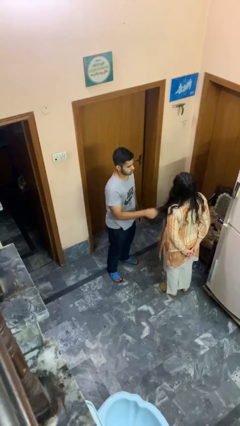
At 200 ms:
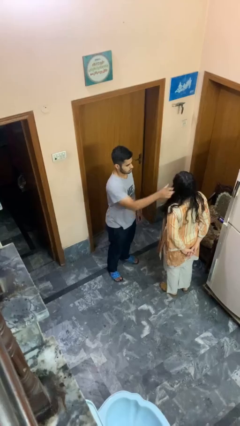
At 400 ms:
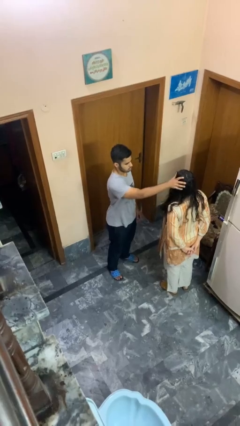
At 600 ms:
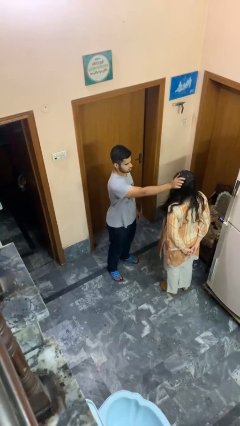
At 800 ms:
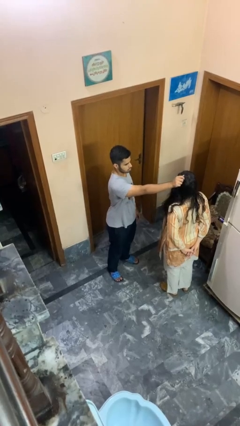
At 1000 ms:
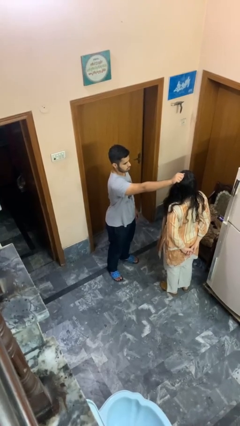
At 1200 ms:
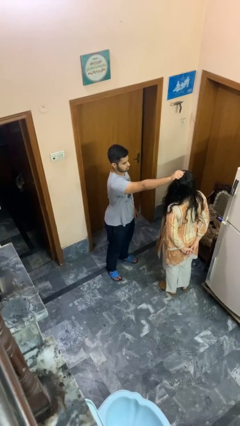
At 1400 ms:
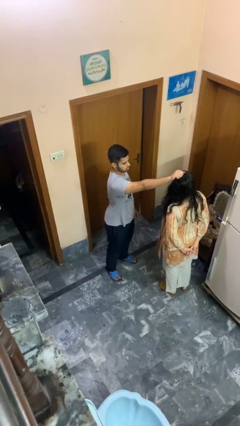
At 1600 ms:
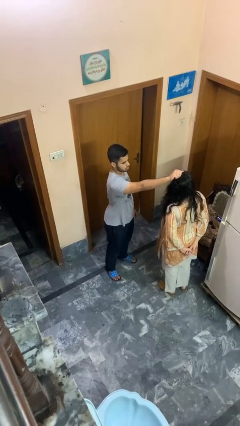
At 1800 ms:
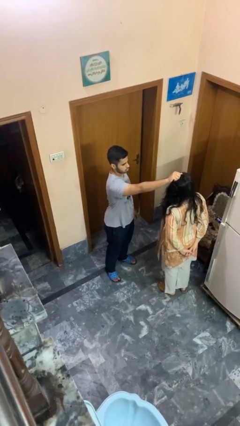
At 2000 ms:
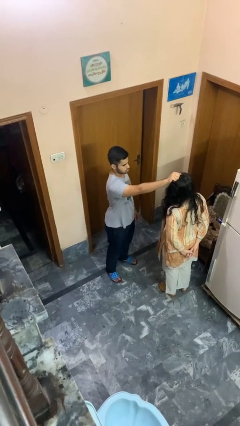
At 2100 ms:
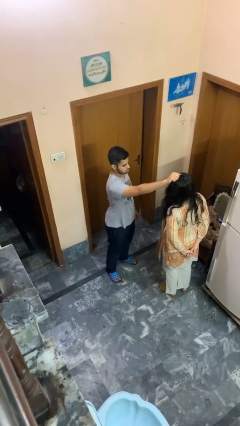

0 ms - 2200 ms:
person grabs person by hair

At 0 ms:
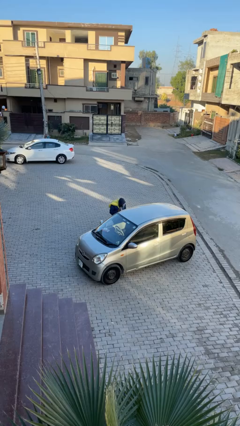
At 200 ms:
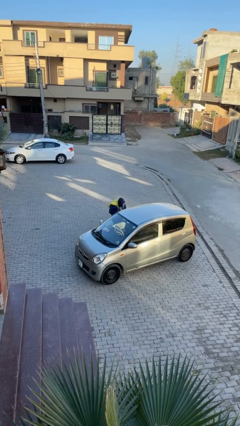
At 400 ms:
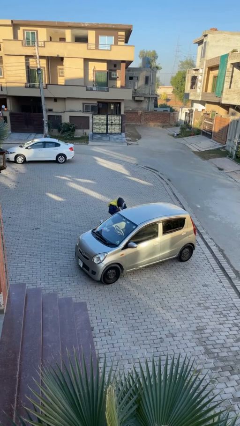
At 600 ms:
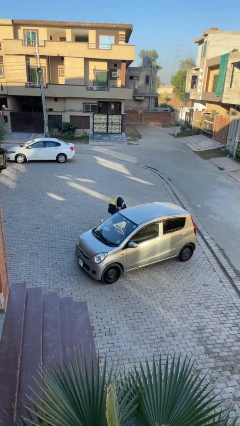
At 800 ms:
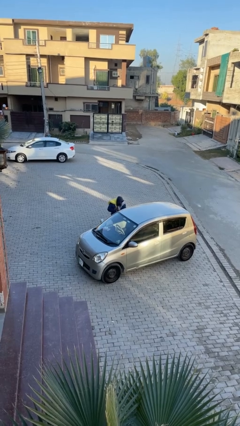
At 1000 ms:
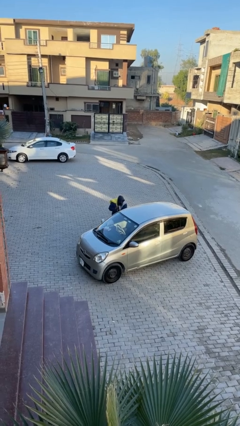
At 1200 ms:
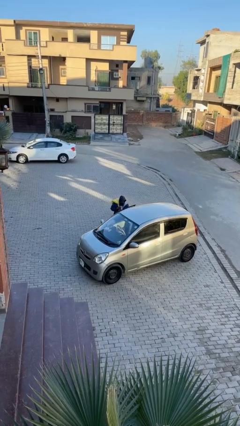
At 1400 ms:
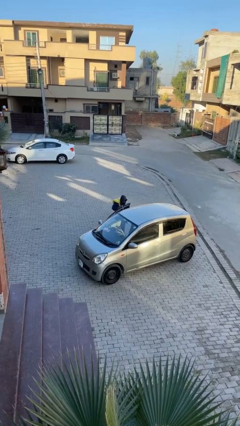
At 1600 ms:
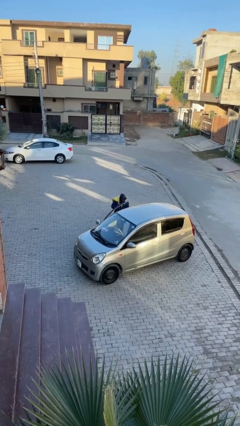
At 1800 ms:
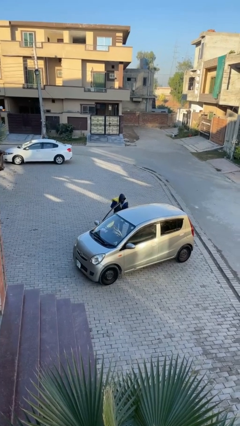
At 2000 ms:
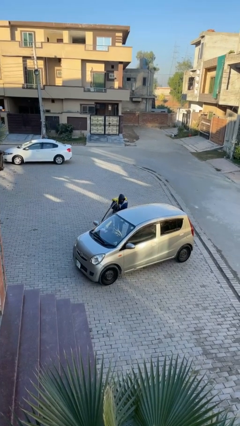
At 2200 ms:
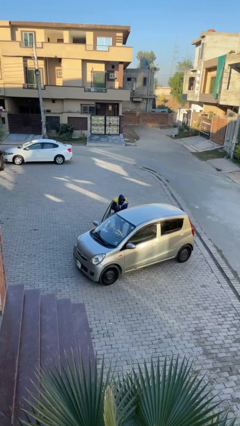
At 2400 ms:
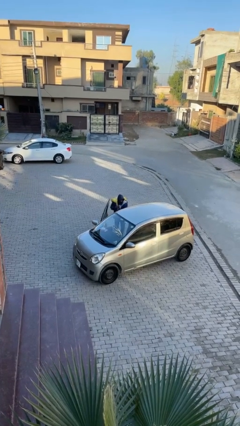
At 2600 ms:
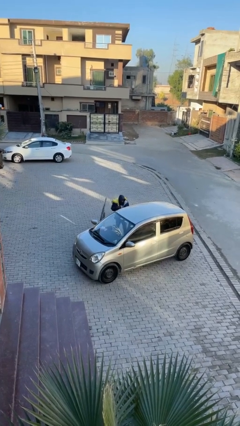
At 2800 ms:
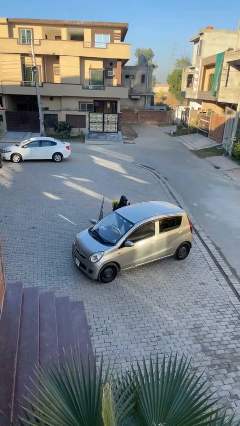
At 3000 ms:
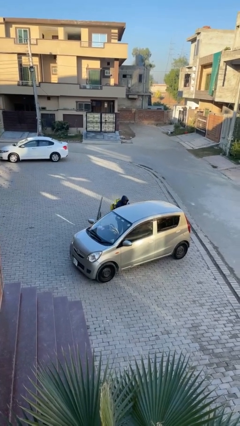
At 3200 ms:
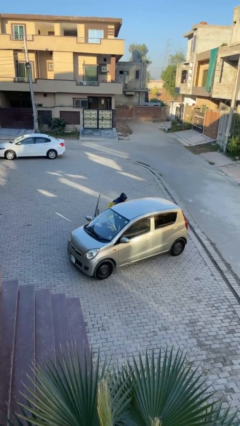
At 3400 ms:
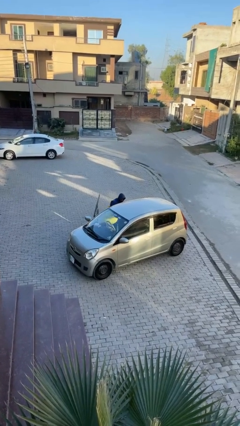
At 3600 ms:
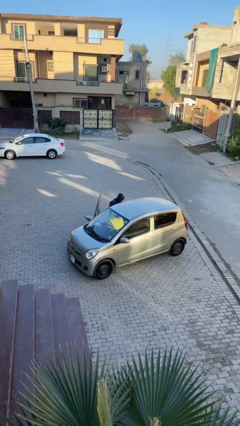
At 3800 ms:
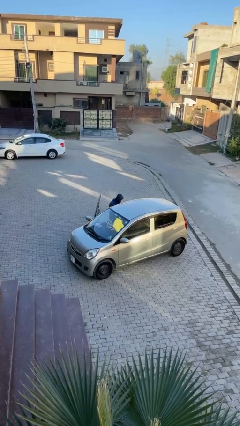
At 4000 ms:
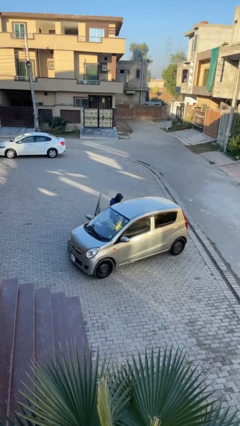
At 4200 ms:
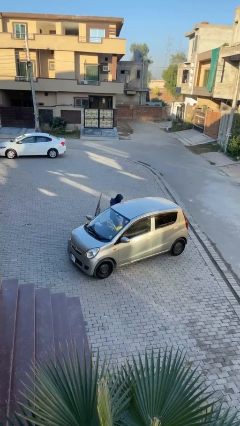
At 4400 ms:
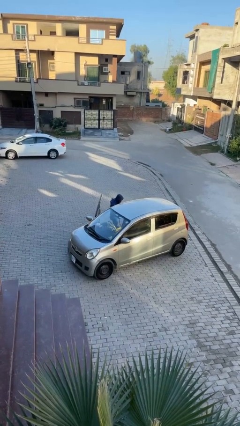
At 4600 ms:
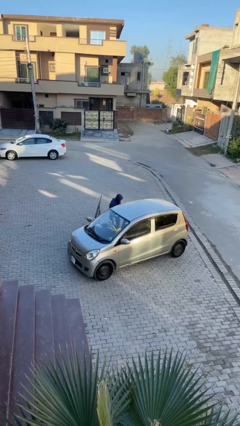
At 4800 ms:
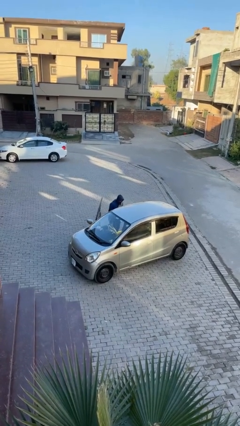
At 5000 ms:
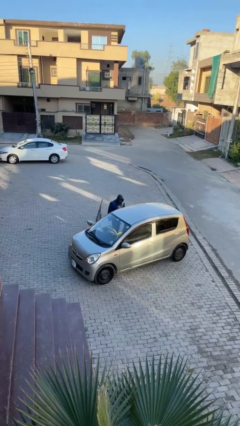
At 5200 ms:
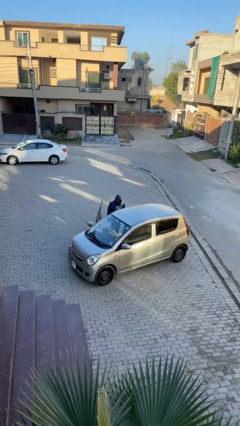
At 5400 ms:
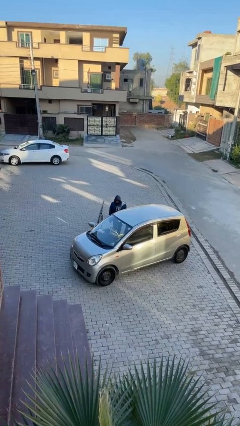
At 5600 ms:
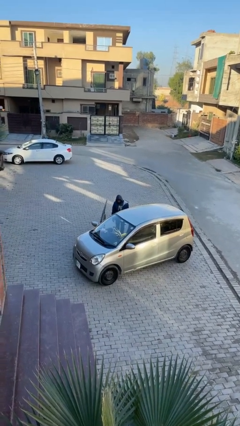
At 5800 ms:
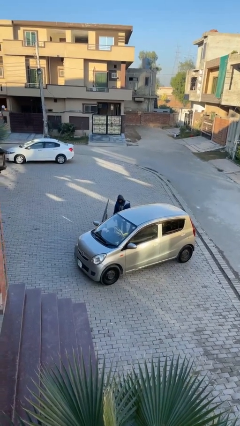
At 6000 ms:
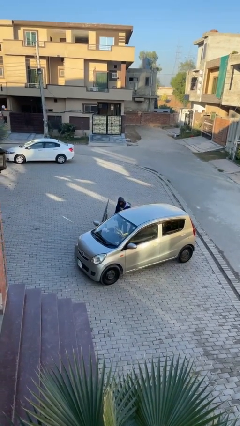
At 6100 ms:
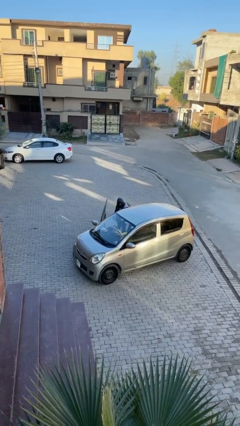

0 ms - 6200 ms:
person loads car

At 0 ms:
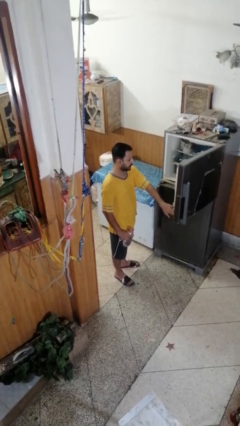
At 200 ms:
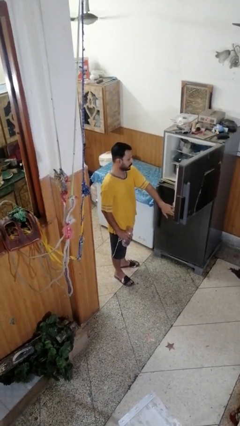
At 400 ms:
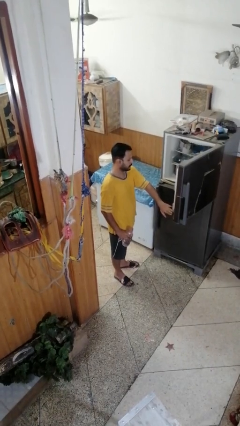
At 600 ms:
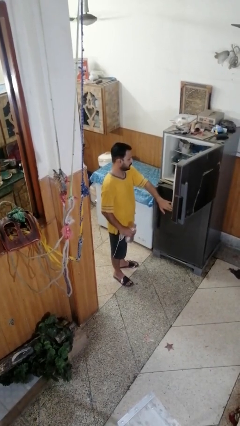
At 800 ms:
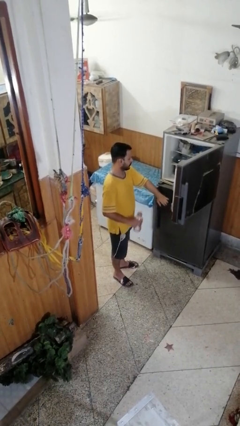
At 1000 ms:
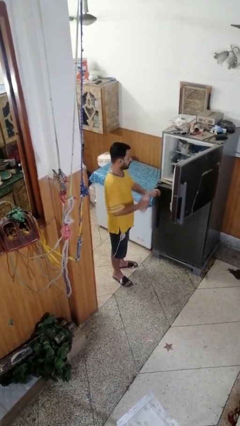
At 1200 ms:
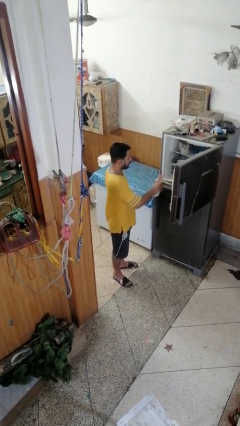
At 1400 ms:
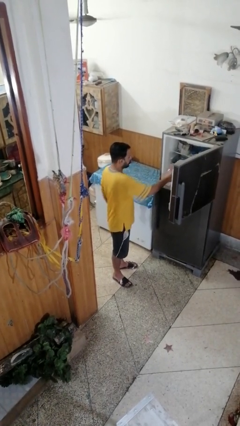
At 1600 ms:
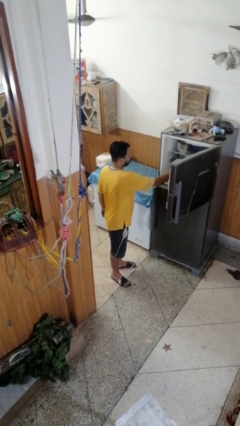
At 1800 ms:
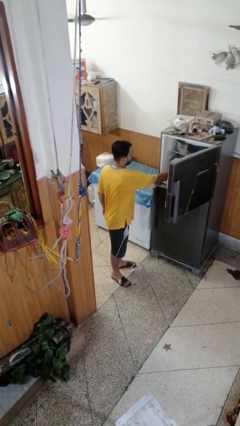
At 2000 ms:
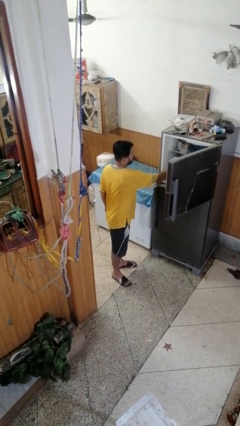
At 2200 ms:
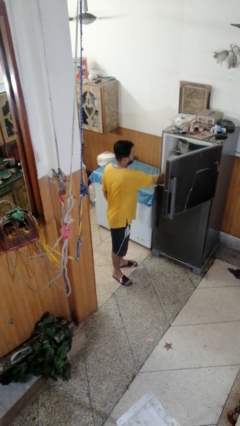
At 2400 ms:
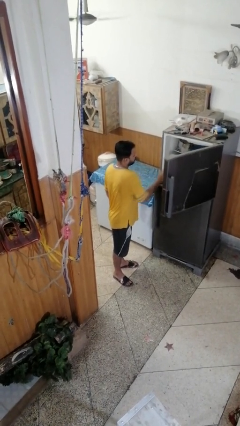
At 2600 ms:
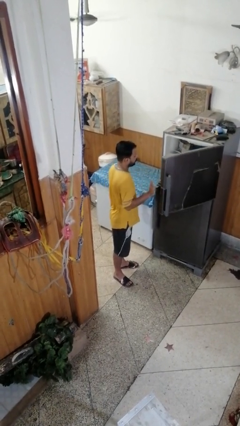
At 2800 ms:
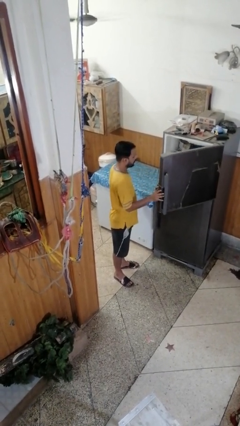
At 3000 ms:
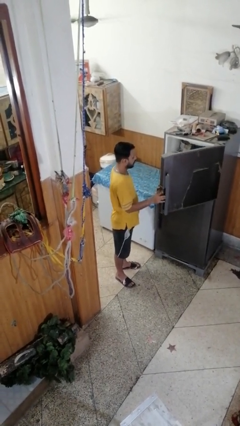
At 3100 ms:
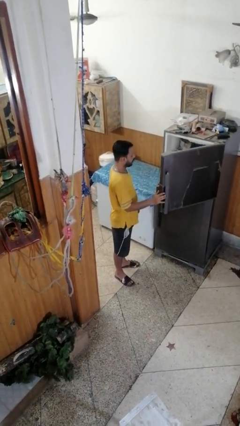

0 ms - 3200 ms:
person puts object into refrigerator

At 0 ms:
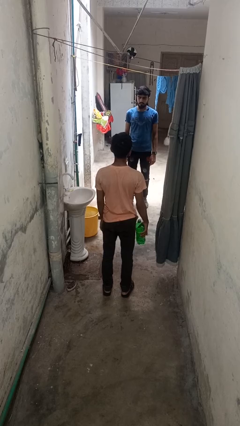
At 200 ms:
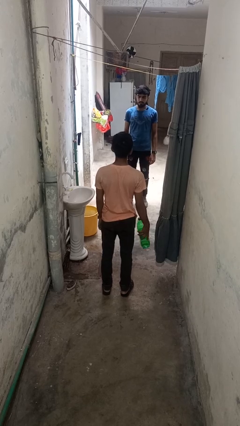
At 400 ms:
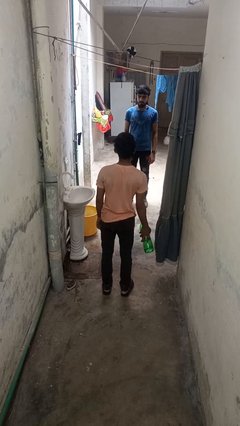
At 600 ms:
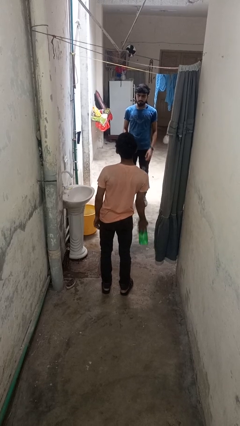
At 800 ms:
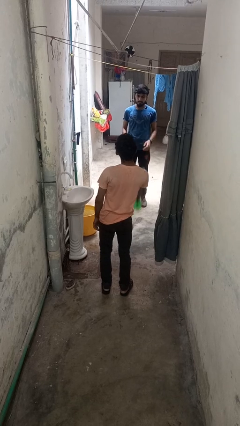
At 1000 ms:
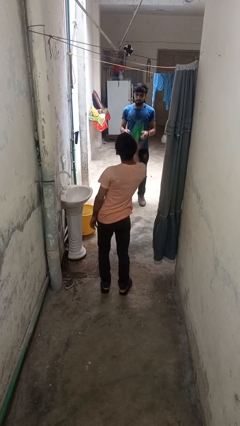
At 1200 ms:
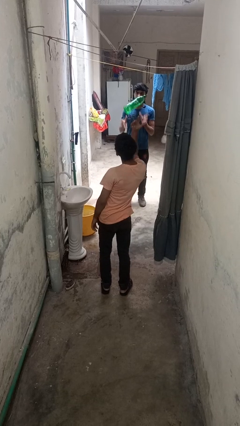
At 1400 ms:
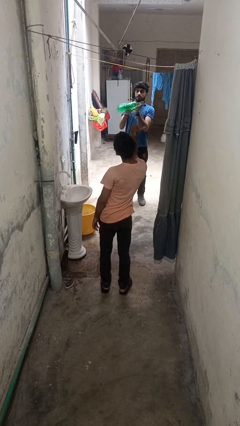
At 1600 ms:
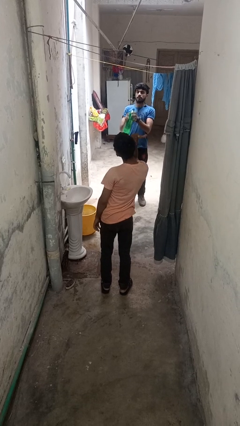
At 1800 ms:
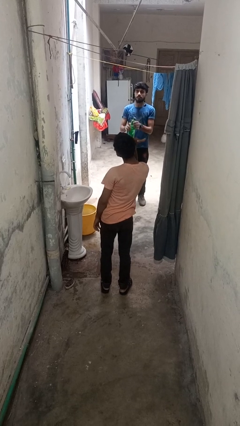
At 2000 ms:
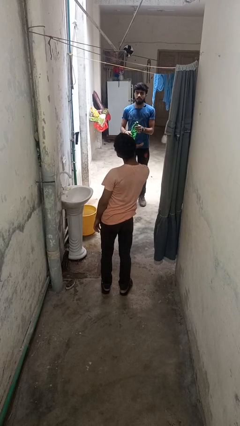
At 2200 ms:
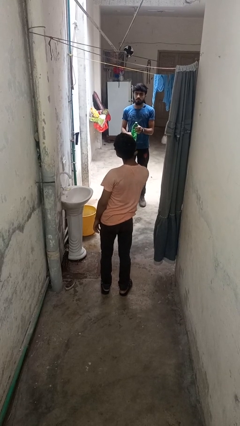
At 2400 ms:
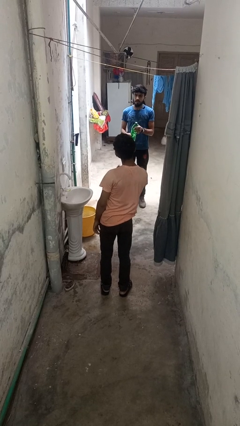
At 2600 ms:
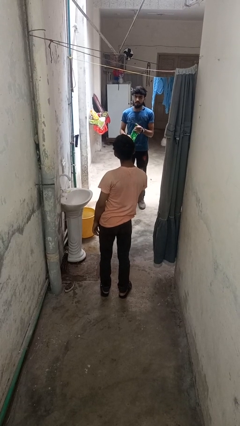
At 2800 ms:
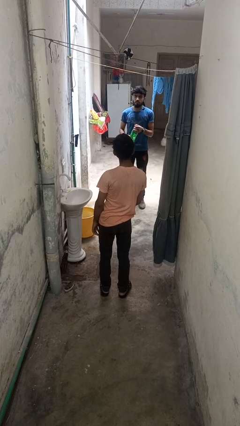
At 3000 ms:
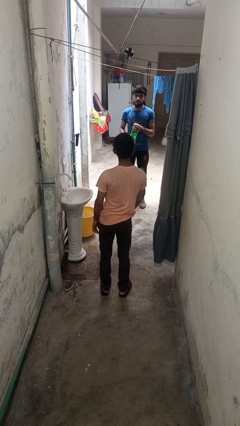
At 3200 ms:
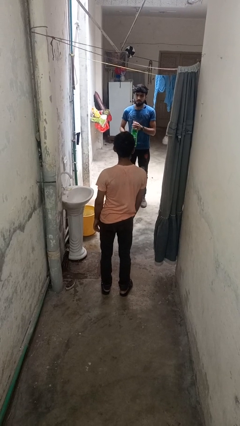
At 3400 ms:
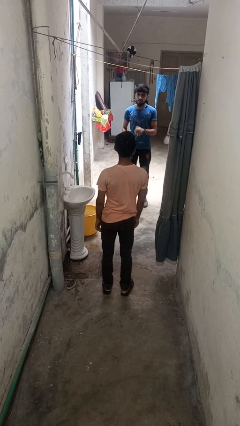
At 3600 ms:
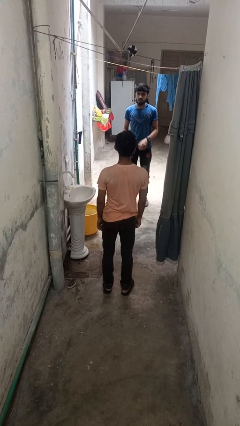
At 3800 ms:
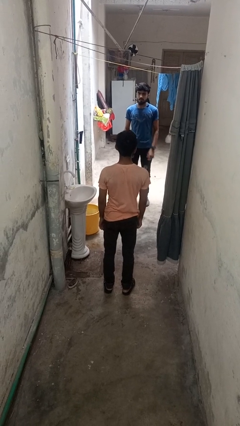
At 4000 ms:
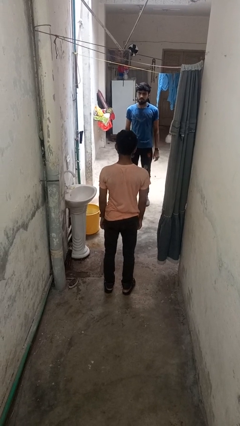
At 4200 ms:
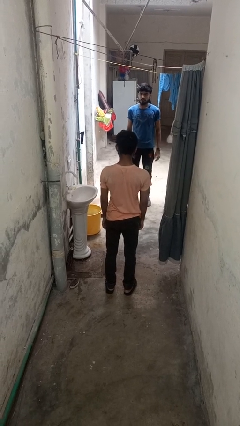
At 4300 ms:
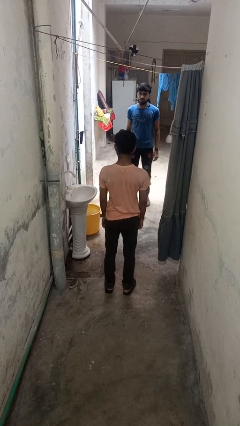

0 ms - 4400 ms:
person throws object to person

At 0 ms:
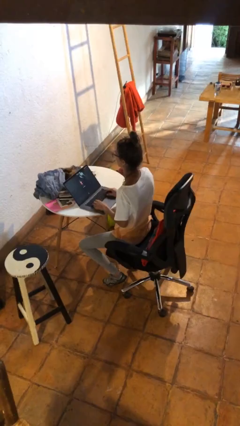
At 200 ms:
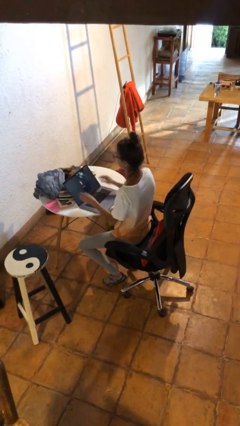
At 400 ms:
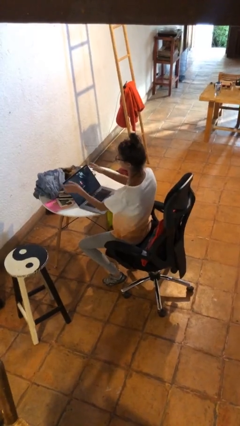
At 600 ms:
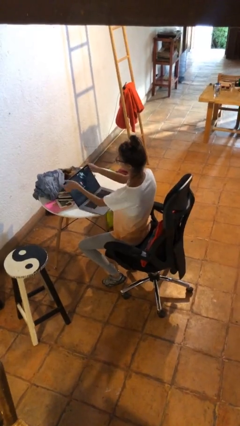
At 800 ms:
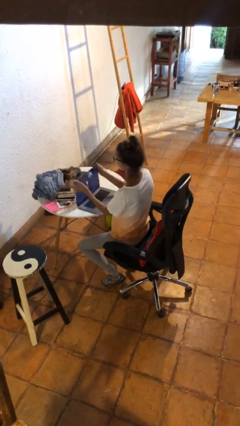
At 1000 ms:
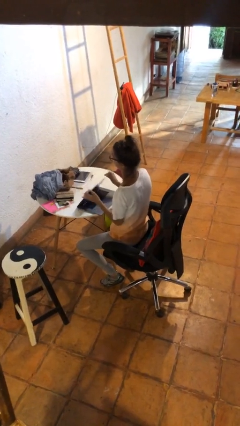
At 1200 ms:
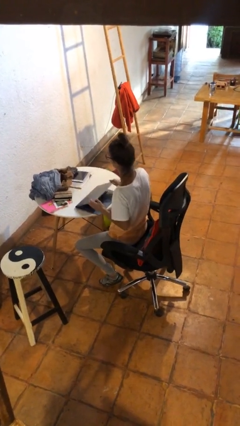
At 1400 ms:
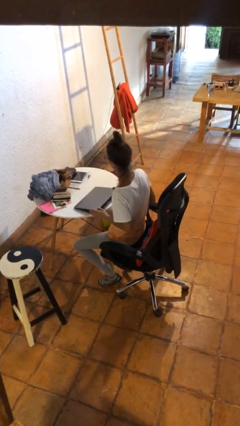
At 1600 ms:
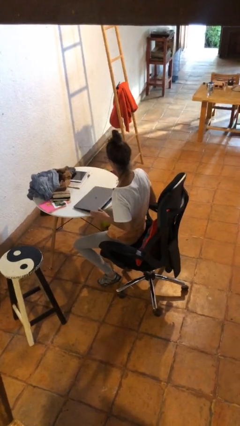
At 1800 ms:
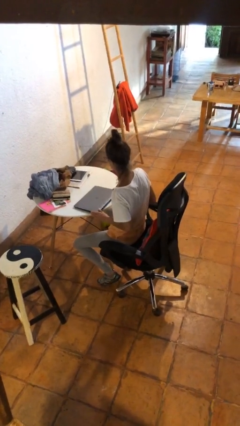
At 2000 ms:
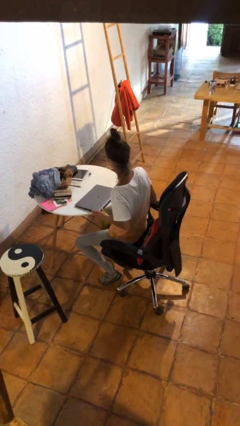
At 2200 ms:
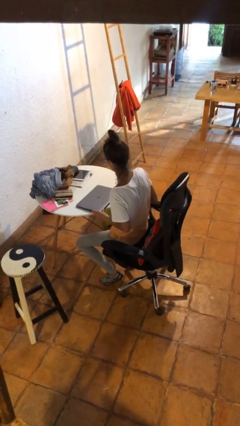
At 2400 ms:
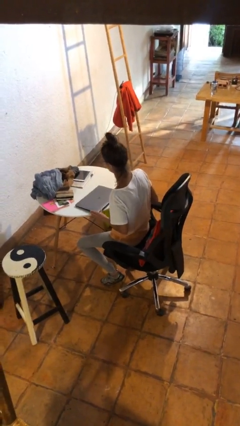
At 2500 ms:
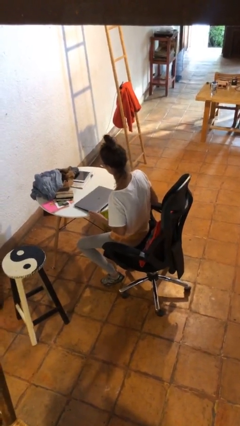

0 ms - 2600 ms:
person closes laptop